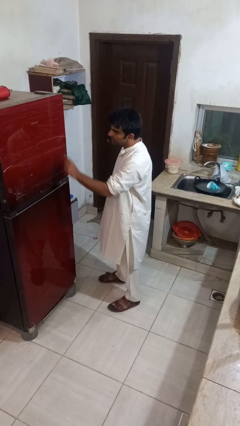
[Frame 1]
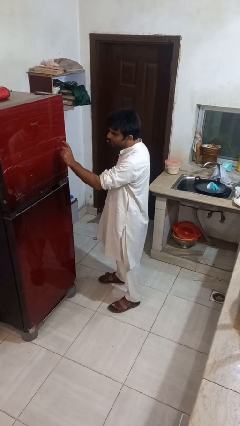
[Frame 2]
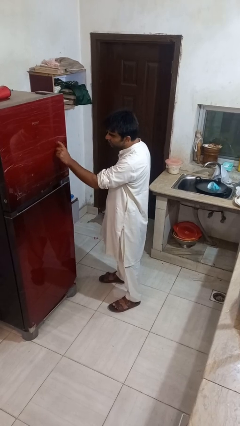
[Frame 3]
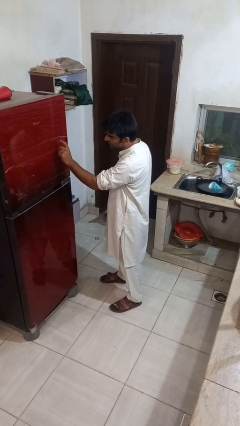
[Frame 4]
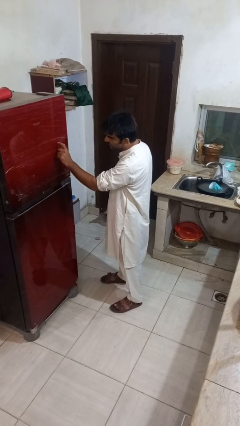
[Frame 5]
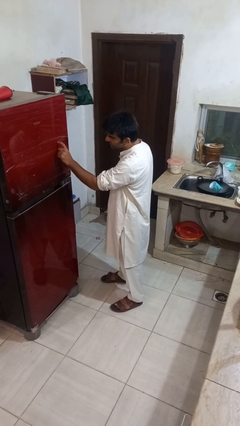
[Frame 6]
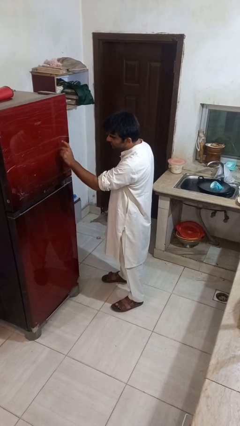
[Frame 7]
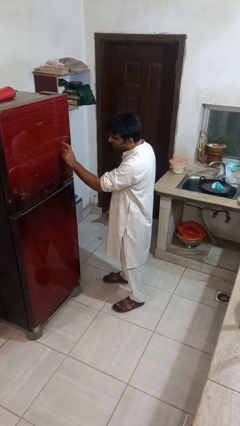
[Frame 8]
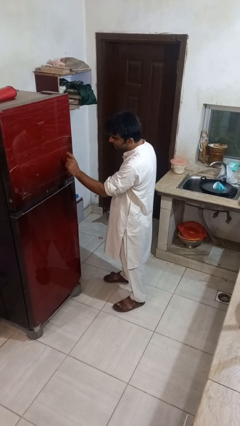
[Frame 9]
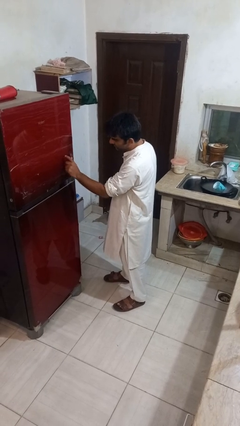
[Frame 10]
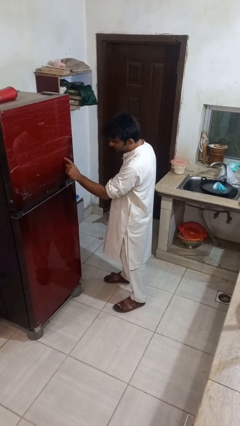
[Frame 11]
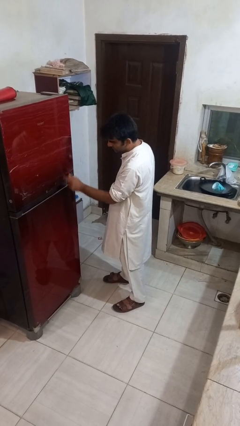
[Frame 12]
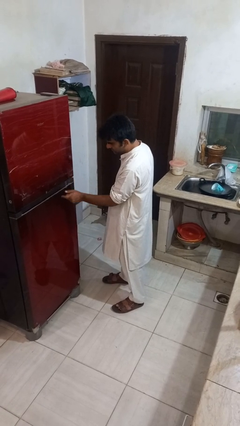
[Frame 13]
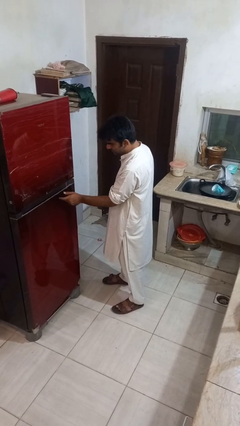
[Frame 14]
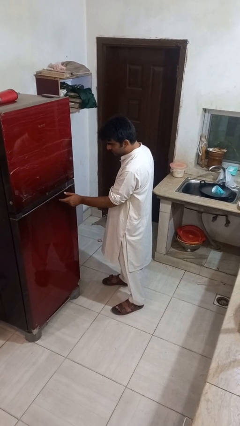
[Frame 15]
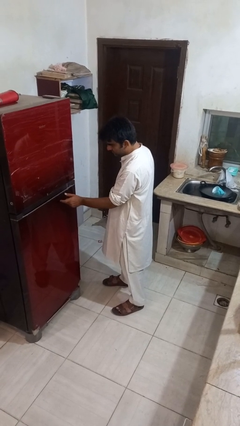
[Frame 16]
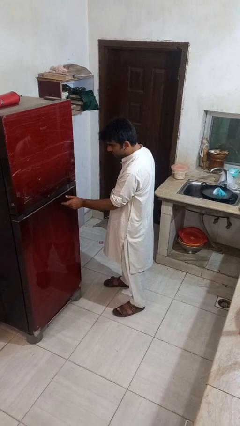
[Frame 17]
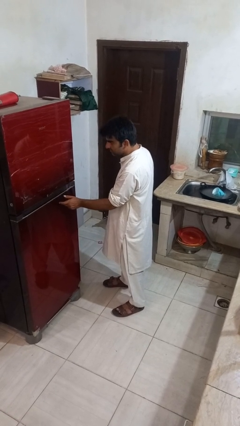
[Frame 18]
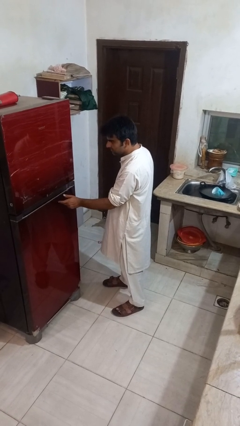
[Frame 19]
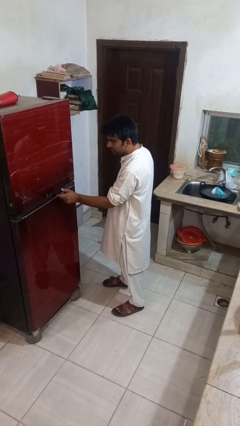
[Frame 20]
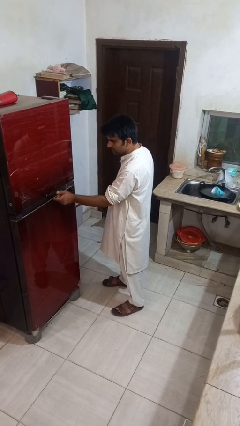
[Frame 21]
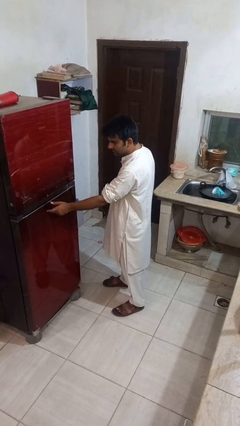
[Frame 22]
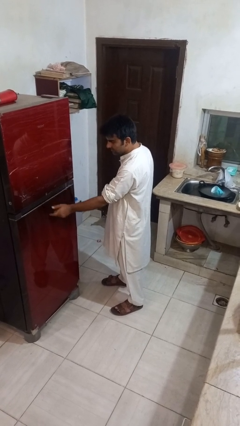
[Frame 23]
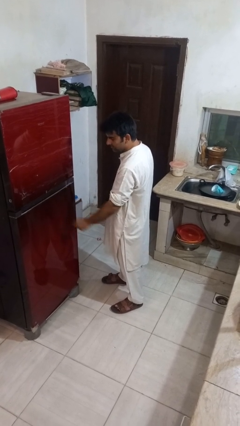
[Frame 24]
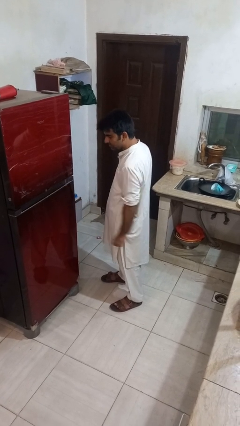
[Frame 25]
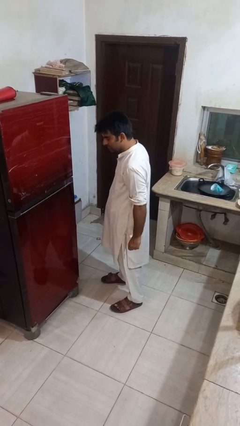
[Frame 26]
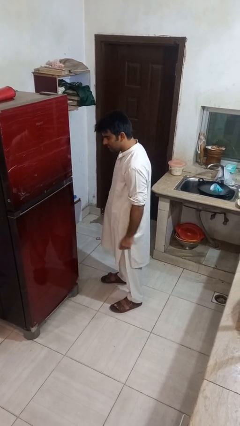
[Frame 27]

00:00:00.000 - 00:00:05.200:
person taps object with finger

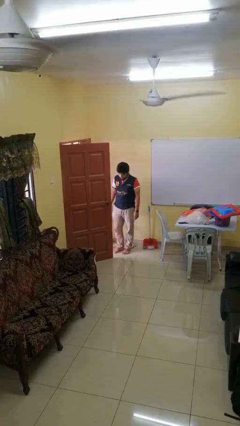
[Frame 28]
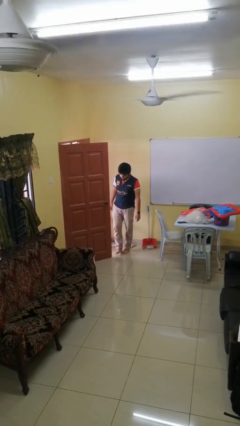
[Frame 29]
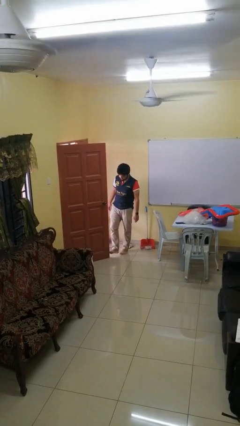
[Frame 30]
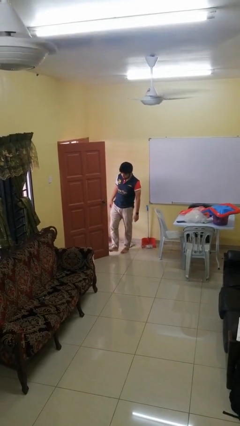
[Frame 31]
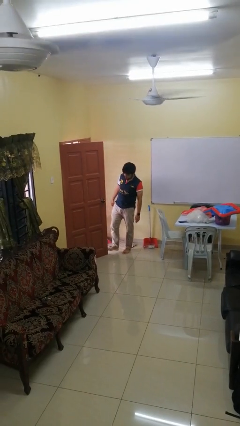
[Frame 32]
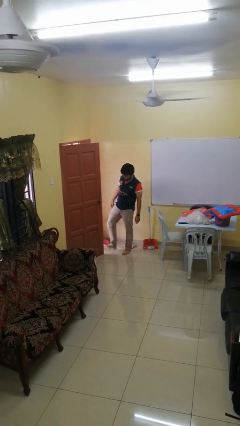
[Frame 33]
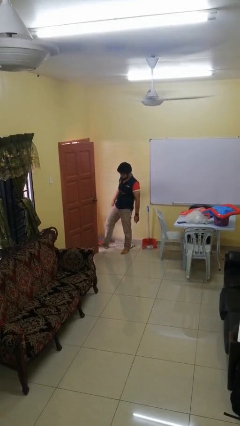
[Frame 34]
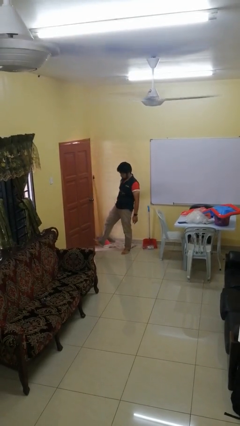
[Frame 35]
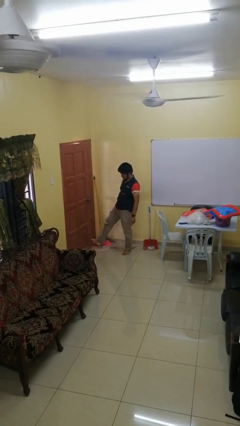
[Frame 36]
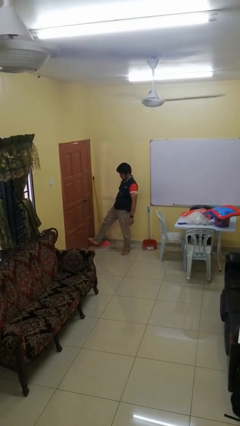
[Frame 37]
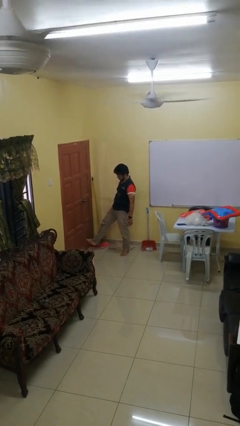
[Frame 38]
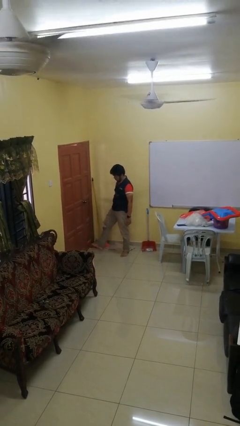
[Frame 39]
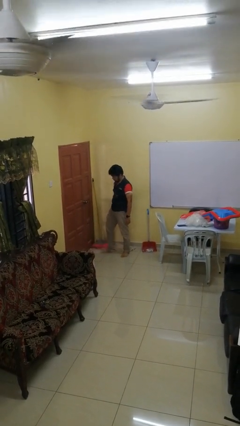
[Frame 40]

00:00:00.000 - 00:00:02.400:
person closes door with foot

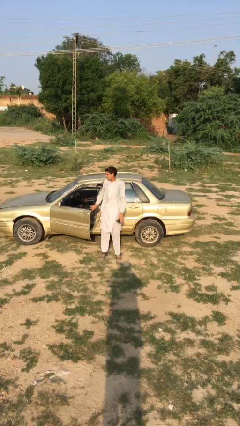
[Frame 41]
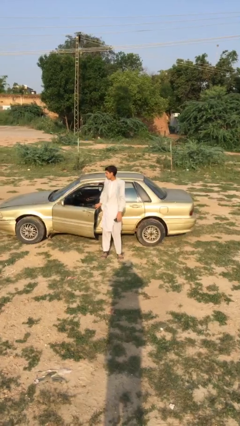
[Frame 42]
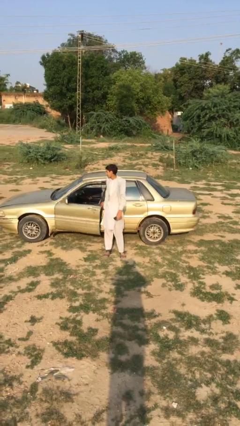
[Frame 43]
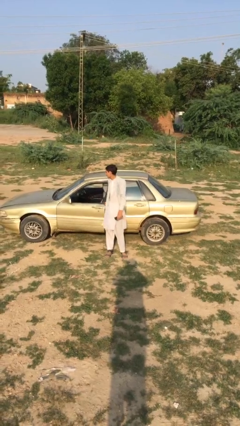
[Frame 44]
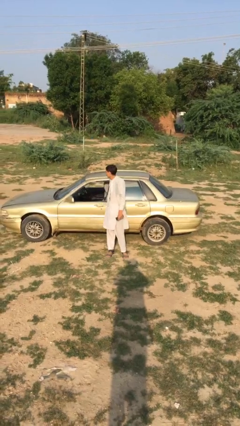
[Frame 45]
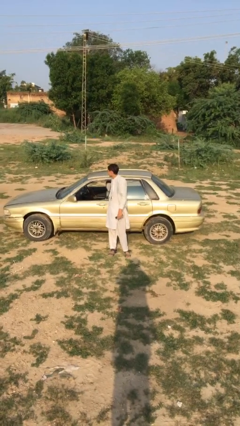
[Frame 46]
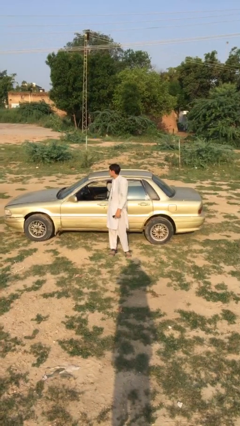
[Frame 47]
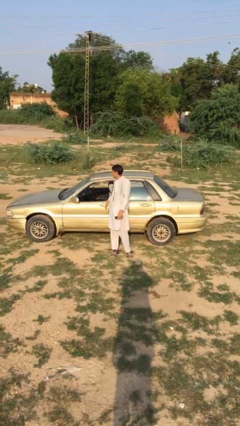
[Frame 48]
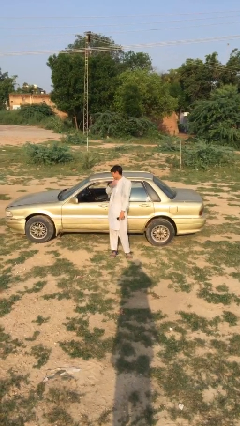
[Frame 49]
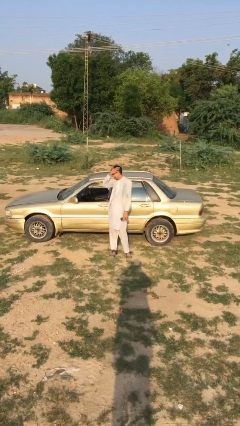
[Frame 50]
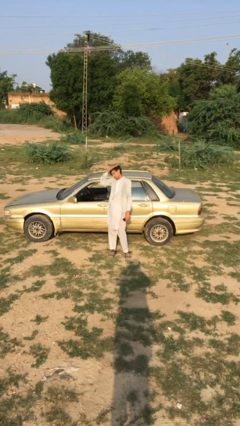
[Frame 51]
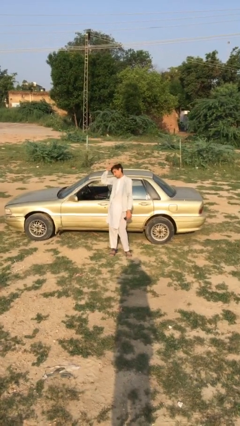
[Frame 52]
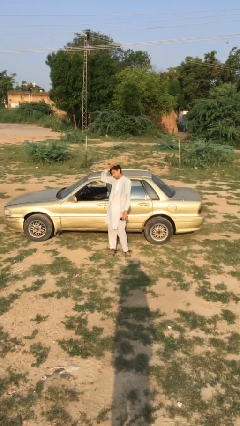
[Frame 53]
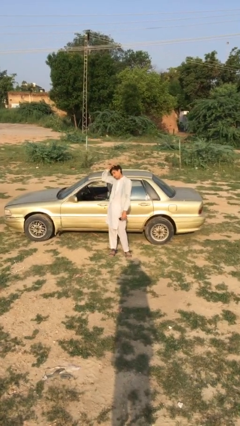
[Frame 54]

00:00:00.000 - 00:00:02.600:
person closes car door

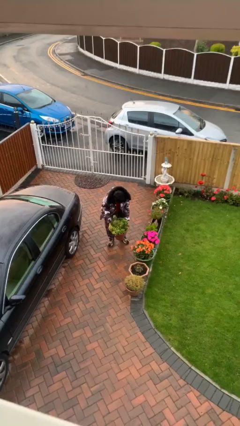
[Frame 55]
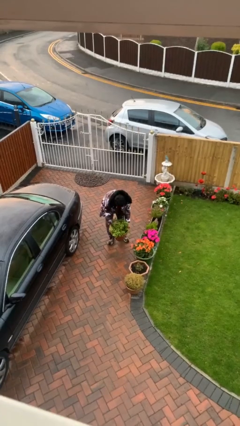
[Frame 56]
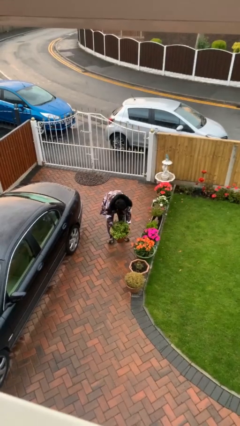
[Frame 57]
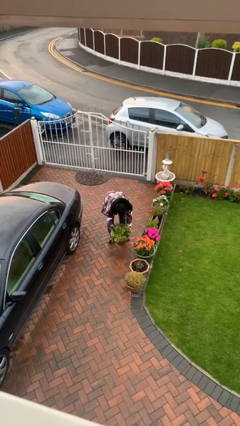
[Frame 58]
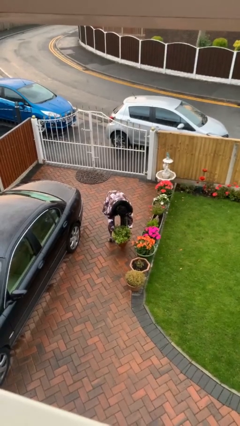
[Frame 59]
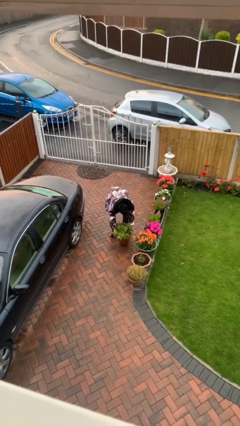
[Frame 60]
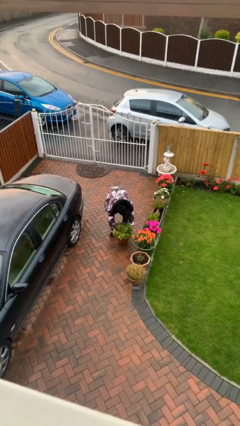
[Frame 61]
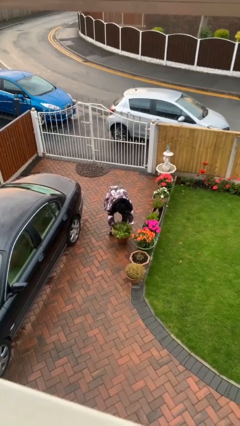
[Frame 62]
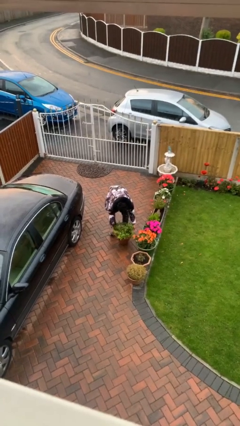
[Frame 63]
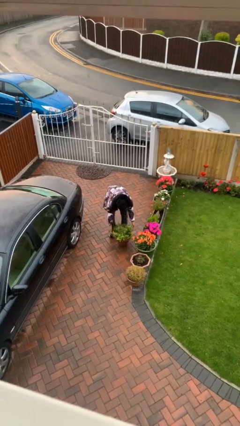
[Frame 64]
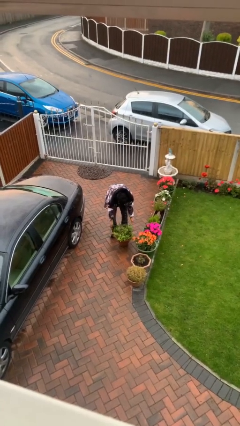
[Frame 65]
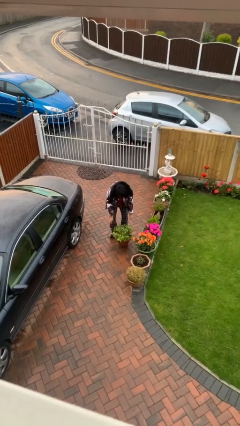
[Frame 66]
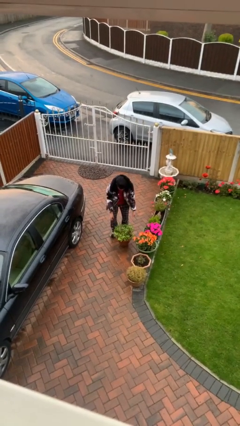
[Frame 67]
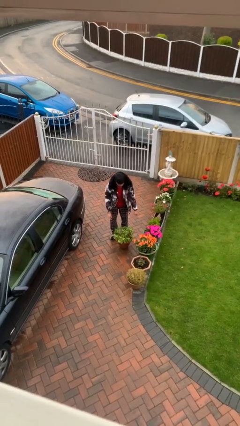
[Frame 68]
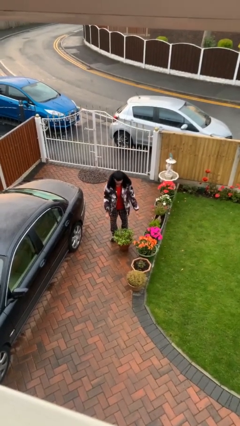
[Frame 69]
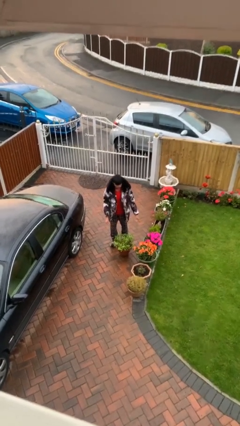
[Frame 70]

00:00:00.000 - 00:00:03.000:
person puts down object on floor

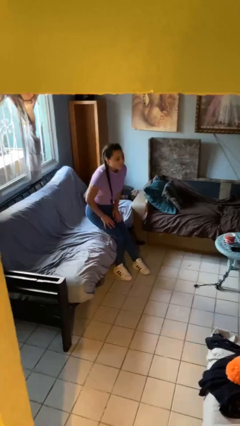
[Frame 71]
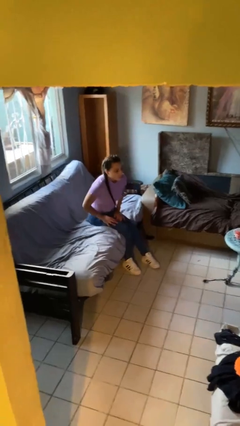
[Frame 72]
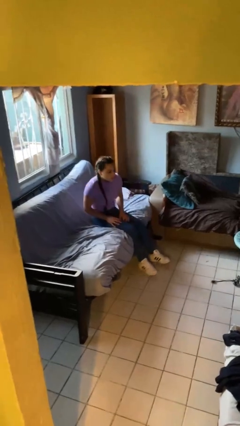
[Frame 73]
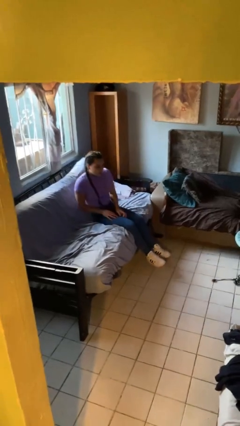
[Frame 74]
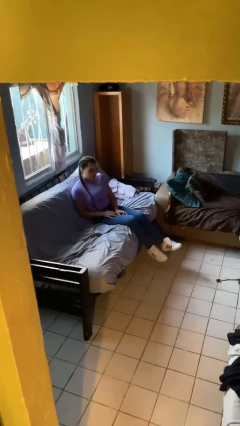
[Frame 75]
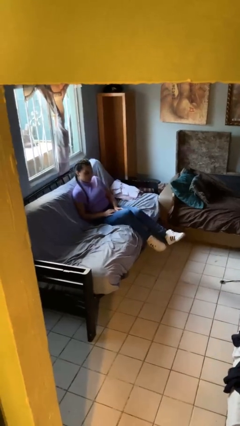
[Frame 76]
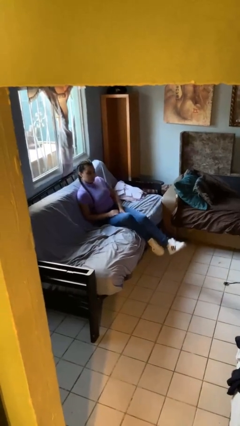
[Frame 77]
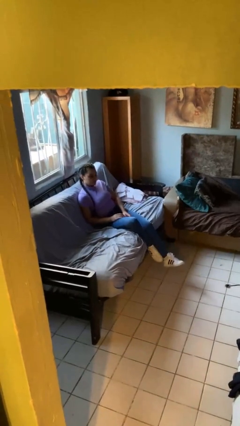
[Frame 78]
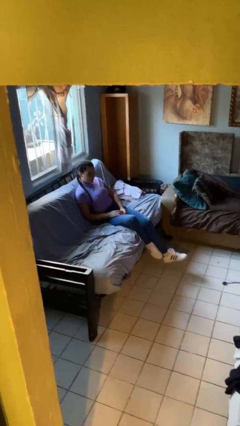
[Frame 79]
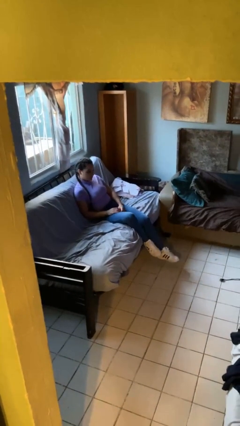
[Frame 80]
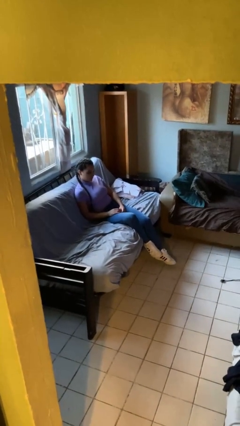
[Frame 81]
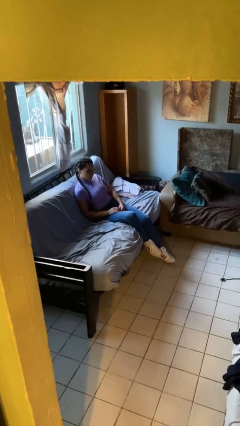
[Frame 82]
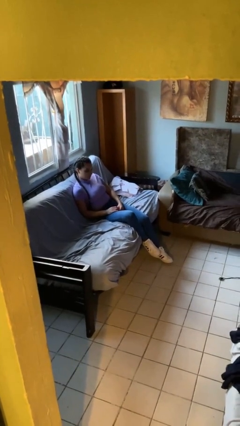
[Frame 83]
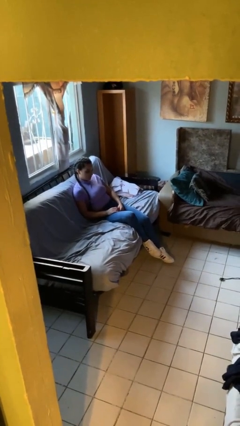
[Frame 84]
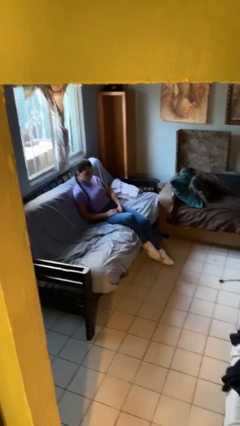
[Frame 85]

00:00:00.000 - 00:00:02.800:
person lies down on couch

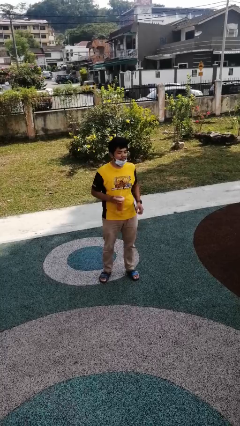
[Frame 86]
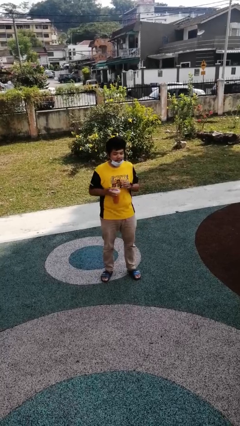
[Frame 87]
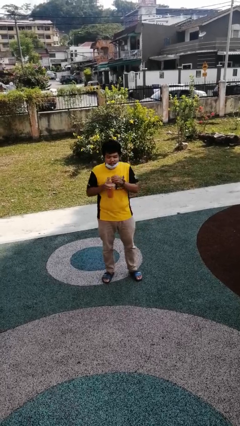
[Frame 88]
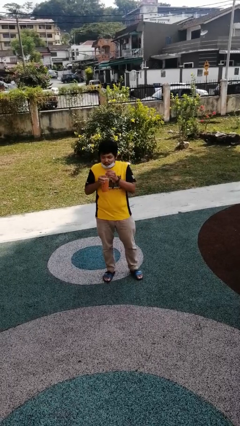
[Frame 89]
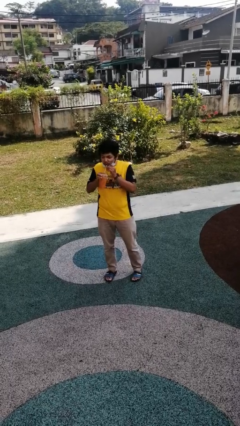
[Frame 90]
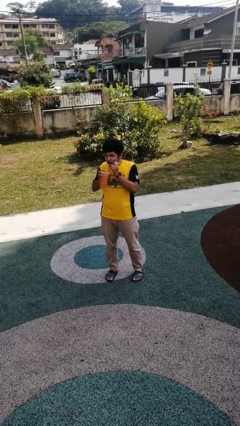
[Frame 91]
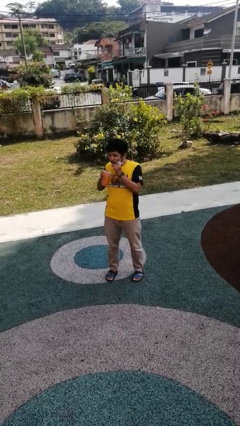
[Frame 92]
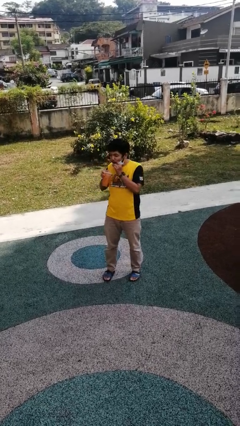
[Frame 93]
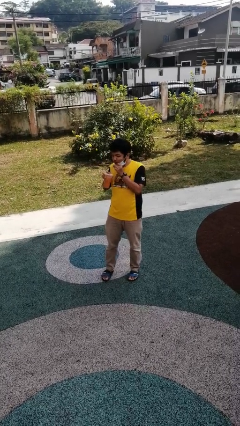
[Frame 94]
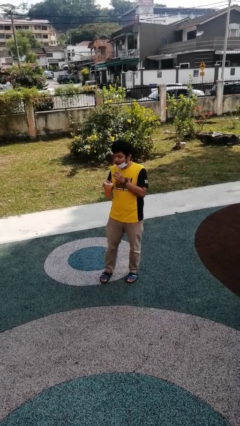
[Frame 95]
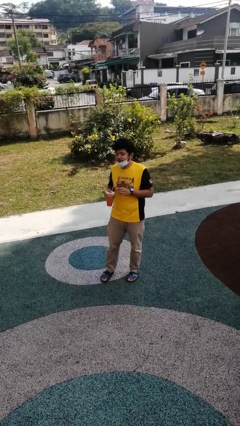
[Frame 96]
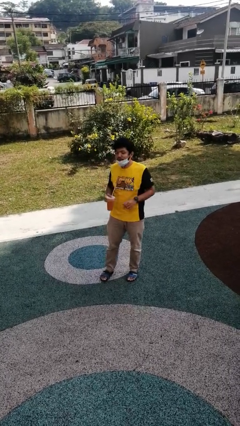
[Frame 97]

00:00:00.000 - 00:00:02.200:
person drinks from straw
